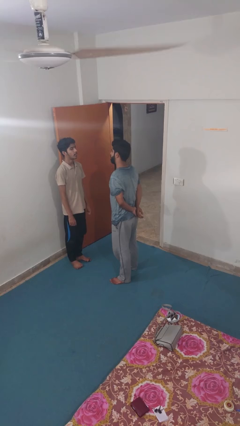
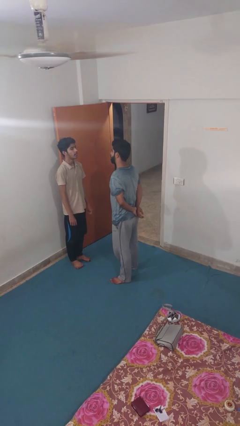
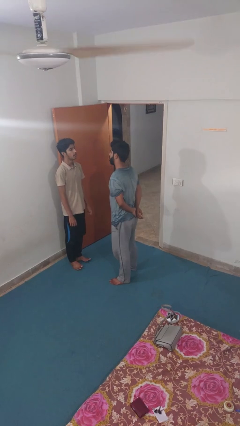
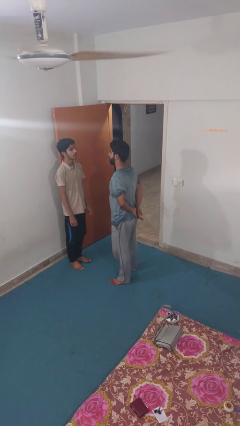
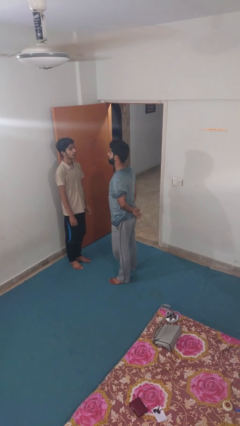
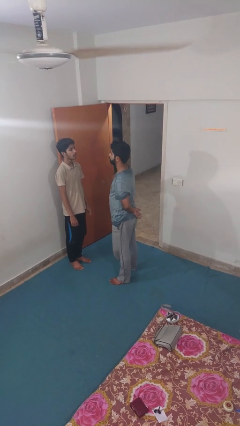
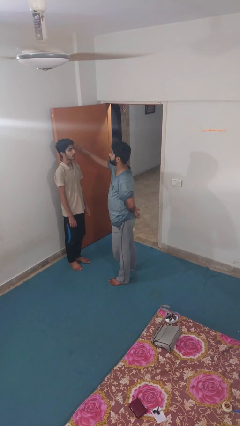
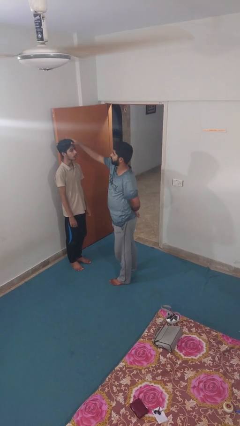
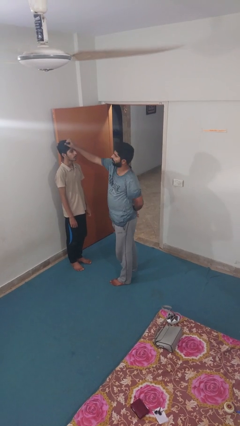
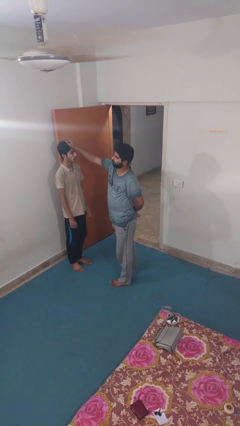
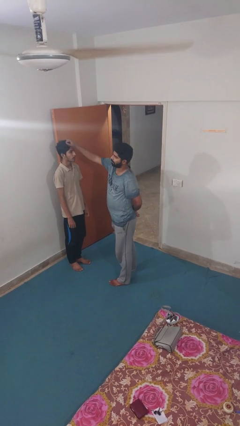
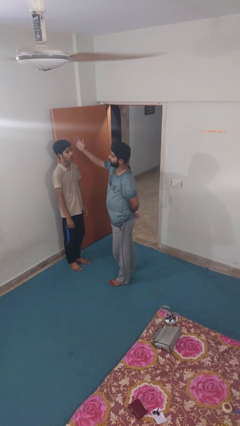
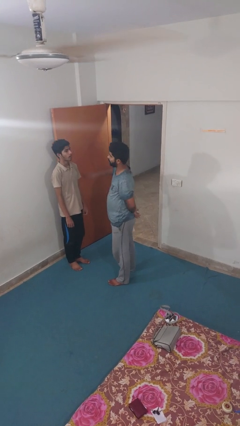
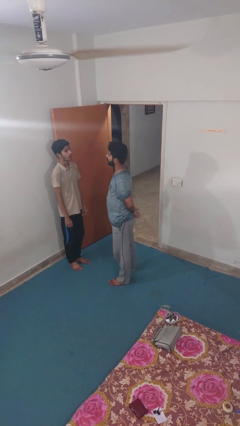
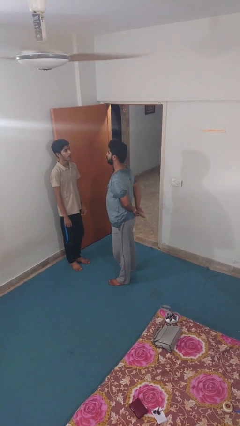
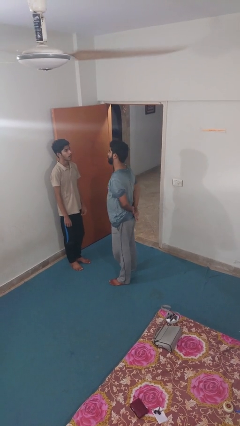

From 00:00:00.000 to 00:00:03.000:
person grabs person by hair

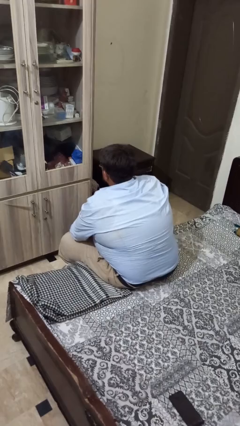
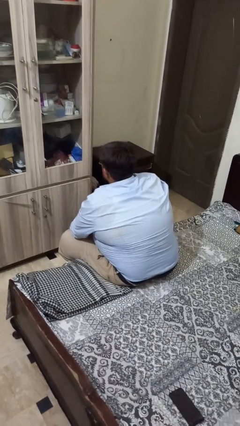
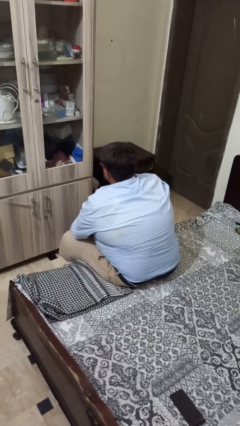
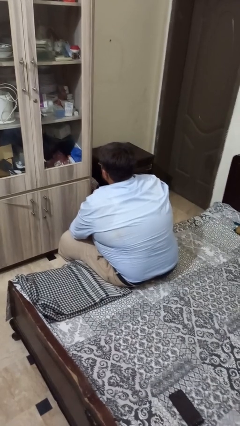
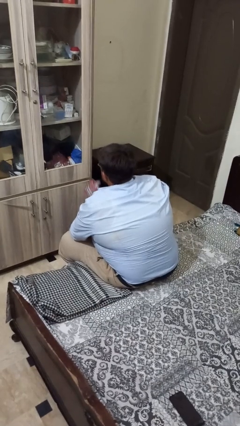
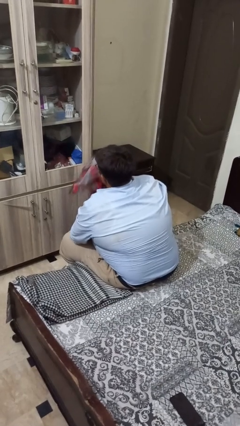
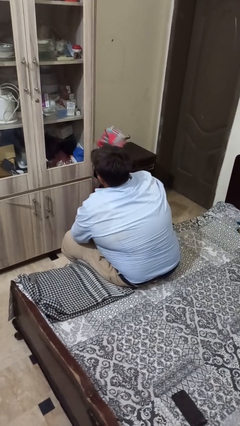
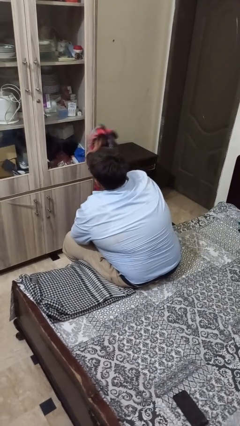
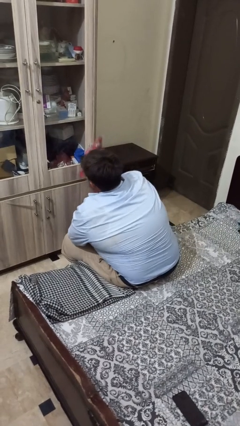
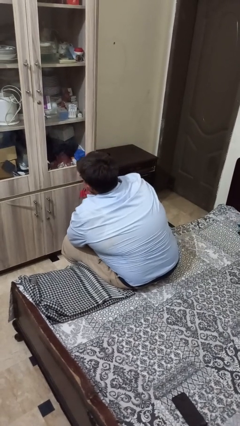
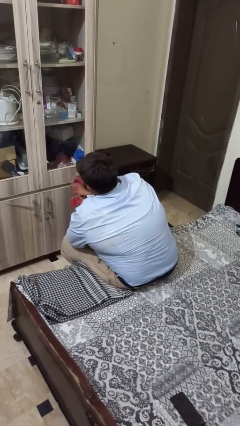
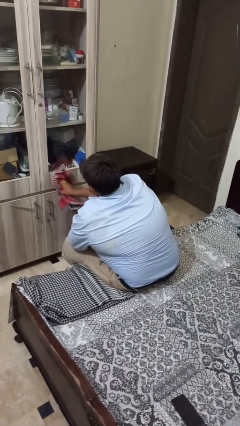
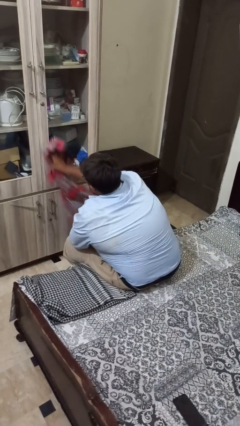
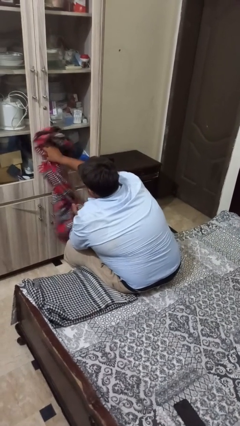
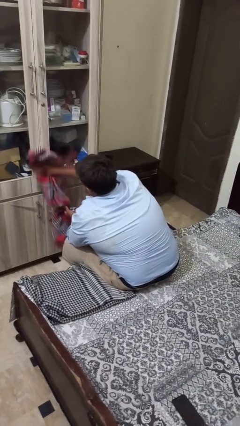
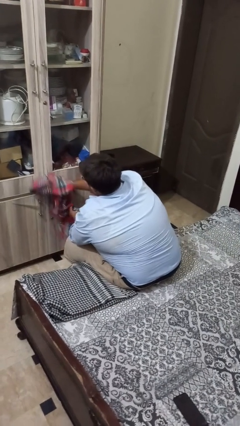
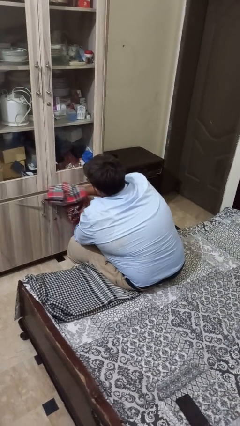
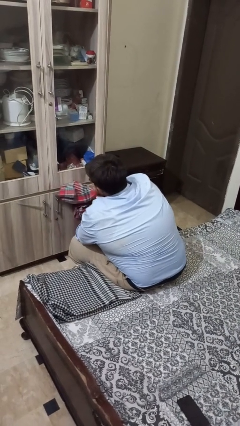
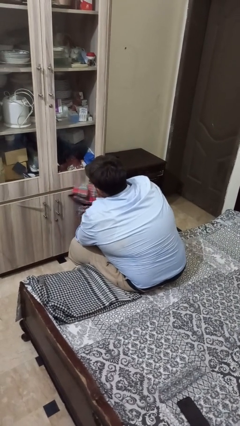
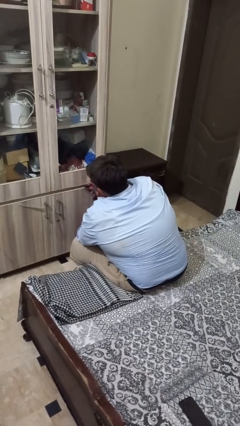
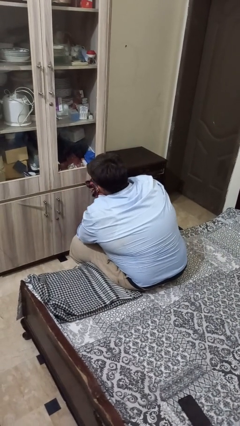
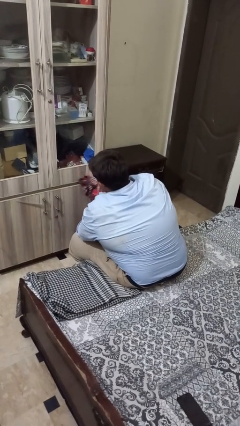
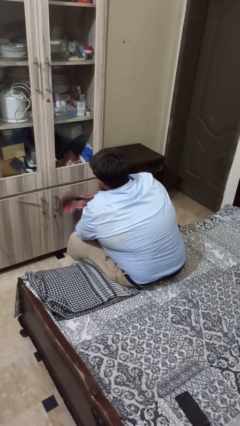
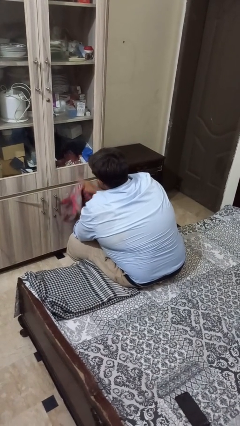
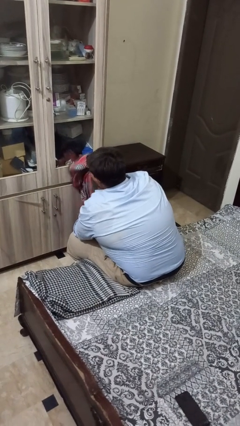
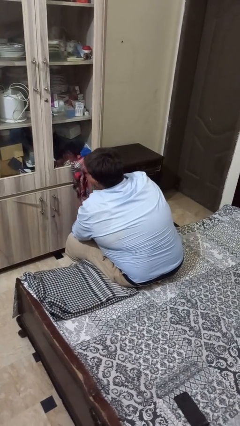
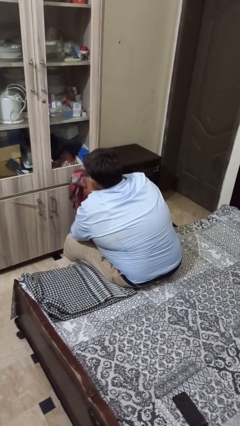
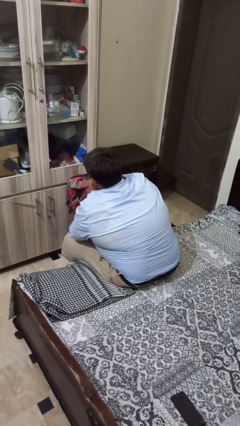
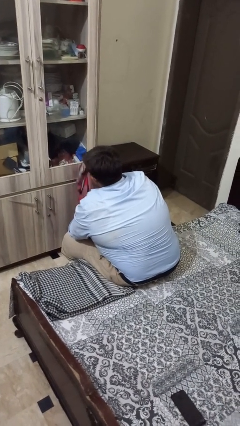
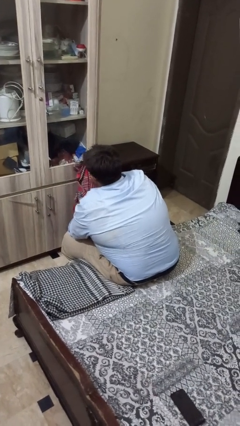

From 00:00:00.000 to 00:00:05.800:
person dusts furniture

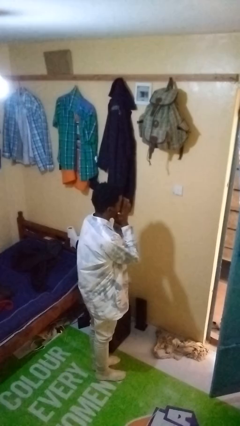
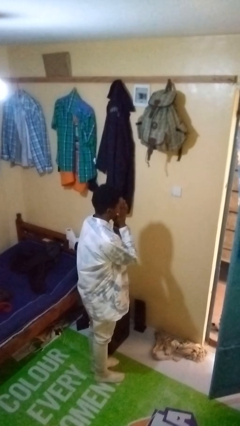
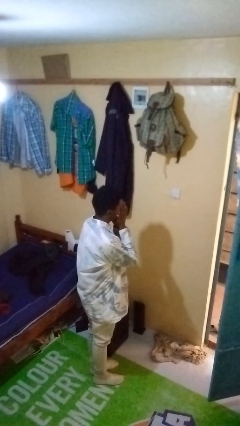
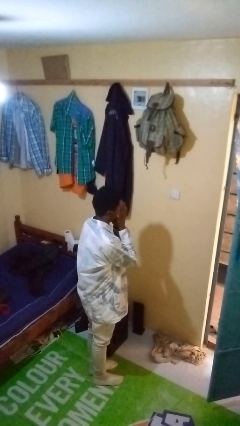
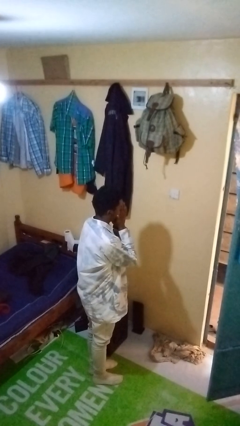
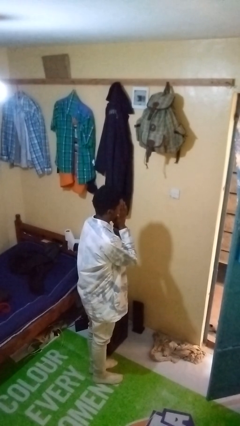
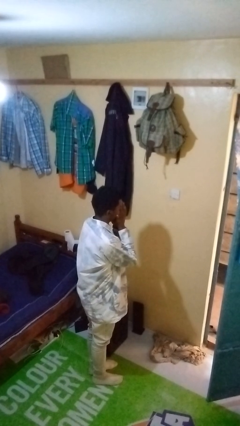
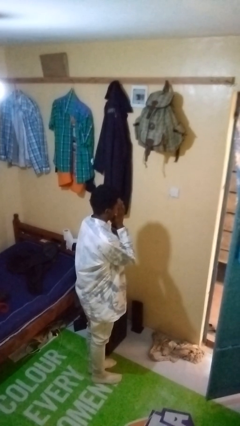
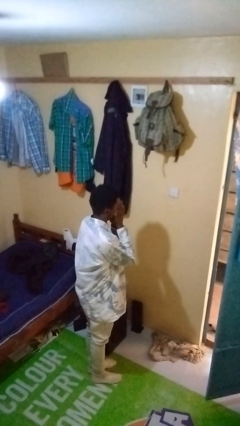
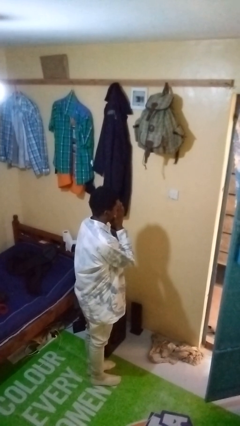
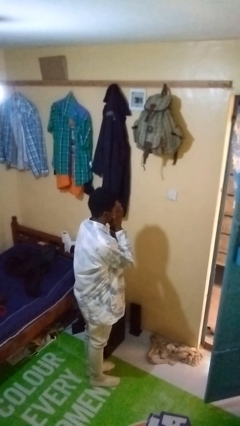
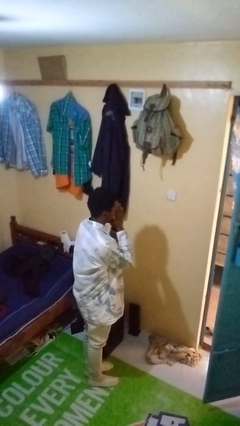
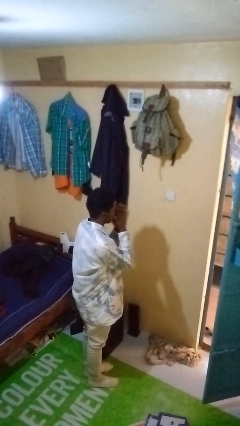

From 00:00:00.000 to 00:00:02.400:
person covers face with hands

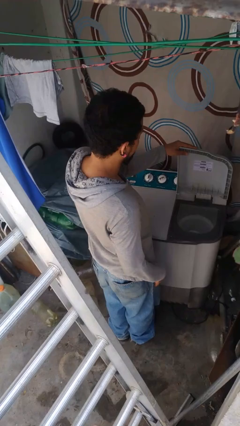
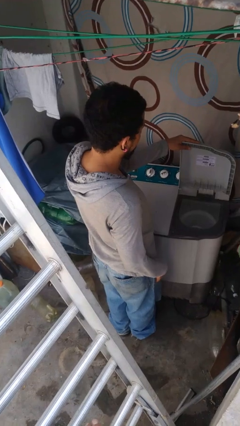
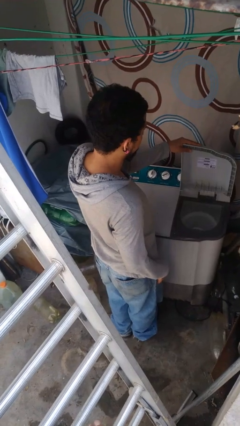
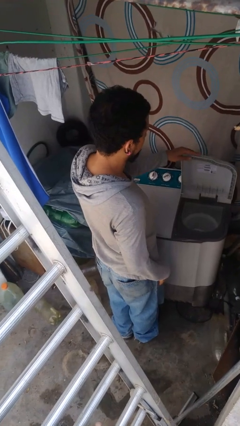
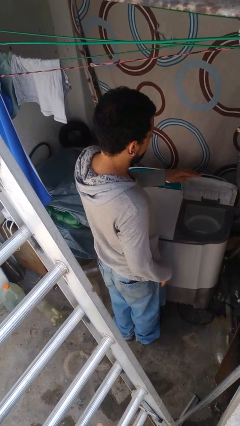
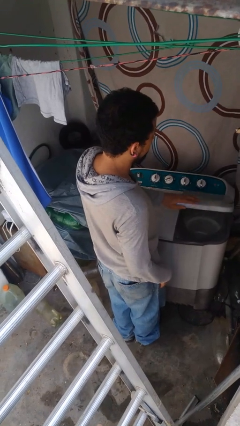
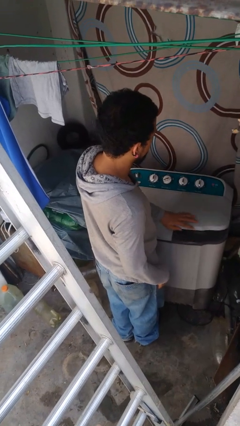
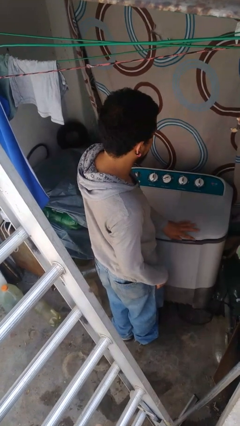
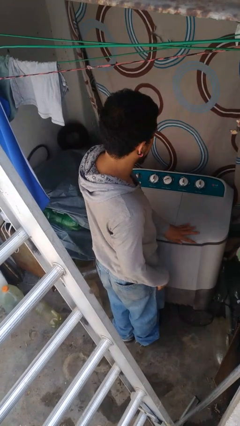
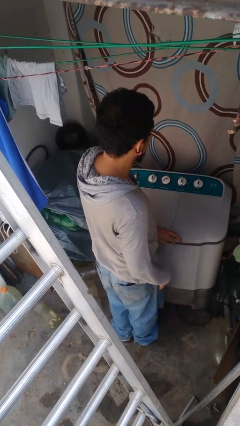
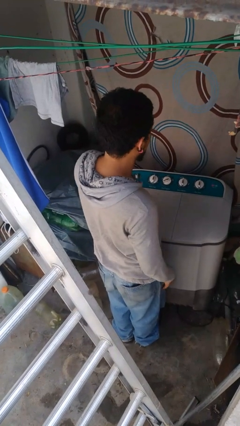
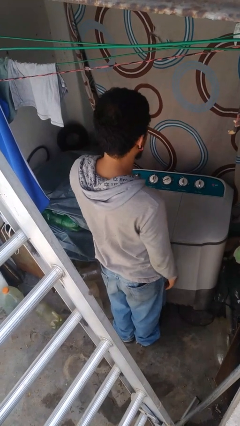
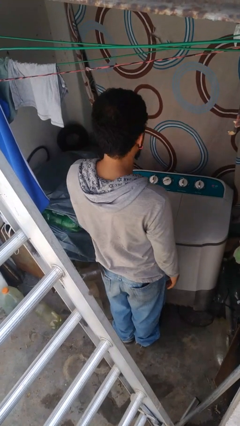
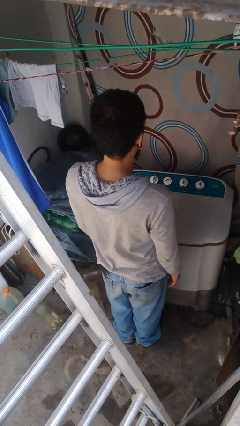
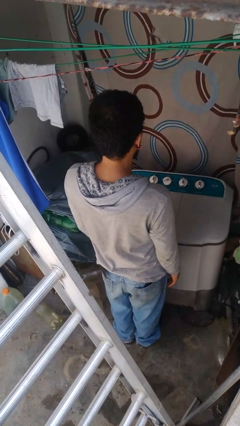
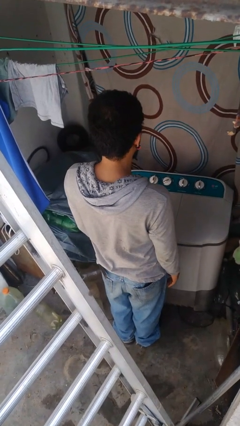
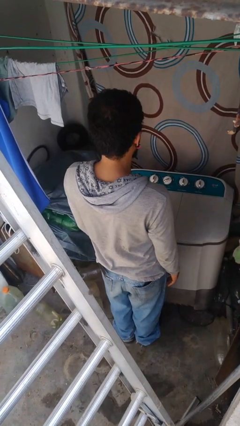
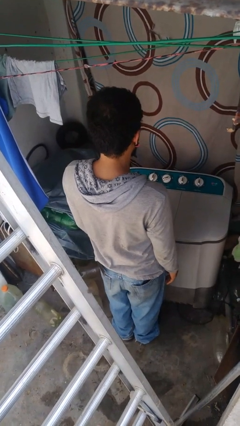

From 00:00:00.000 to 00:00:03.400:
person closes clothes washer

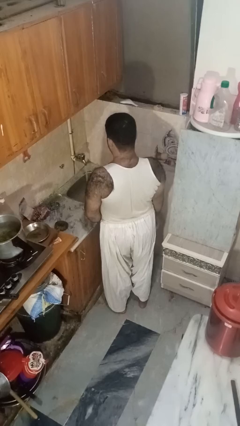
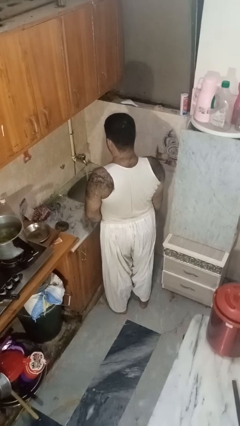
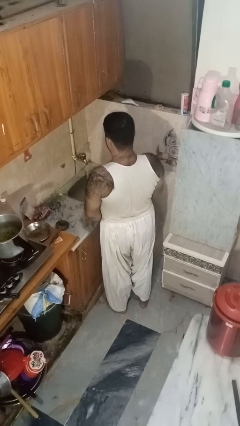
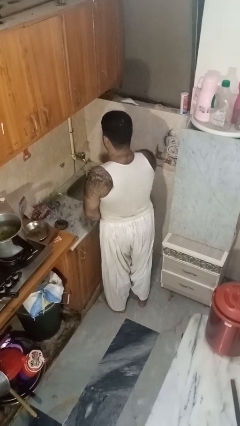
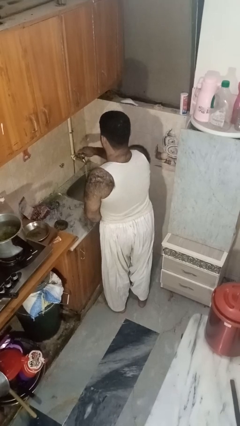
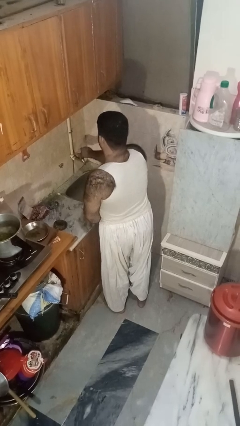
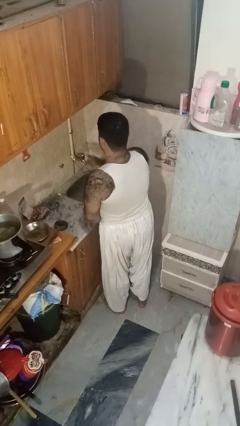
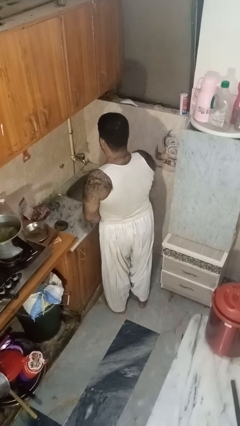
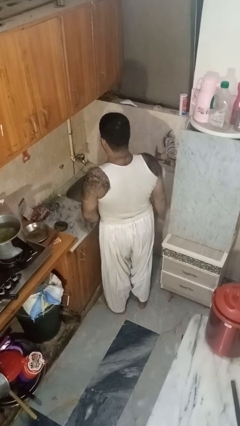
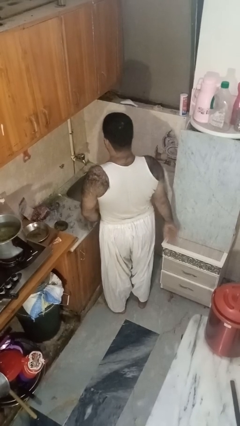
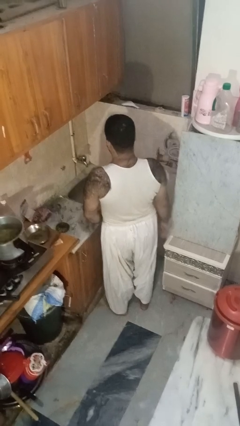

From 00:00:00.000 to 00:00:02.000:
person turns off faucet

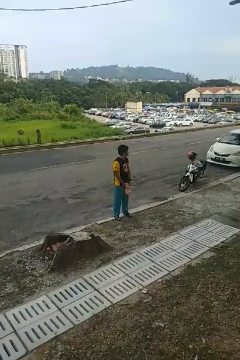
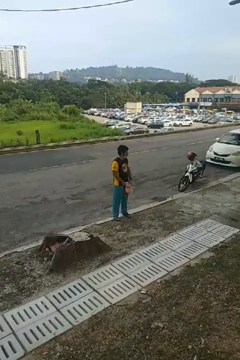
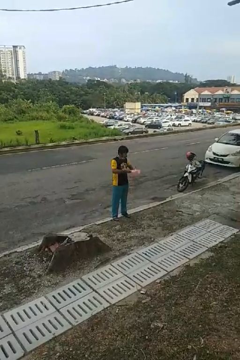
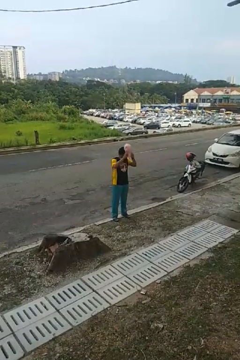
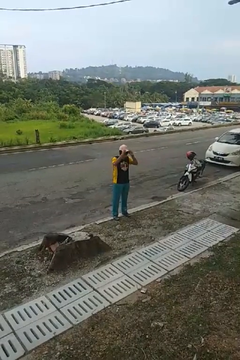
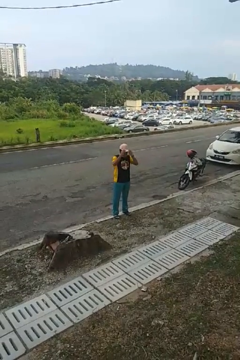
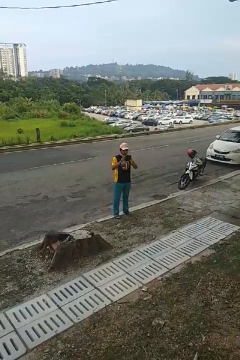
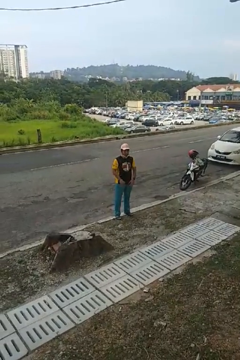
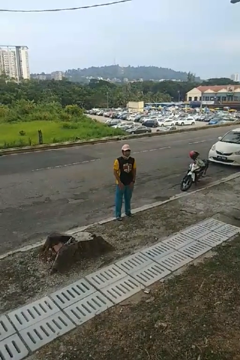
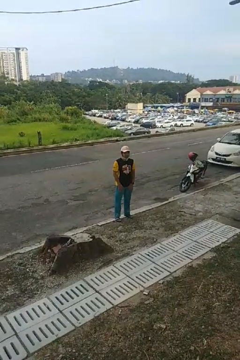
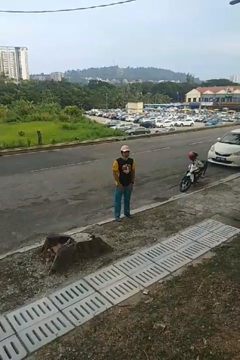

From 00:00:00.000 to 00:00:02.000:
person puts on hat
